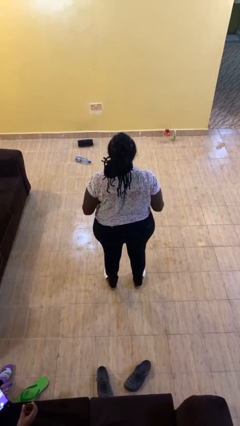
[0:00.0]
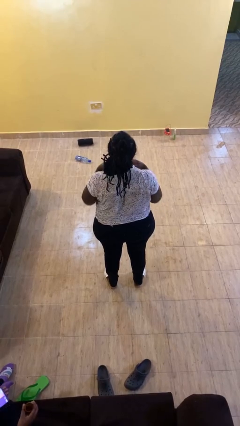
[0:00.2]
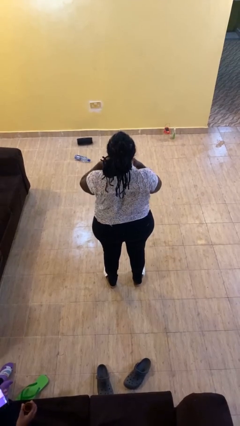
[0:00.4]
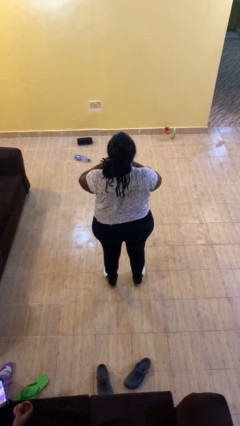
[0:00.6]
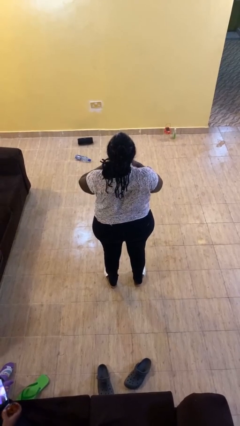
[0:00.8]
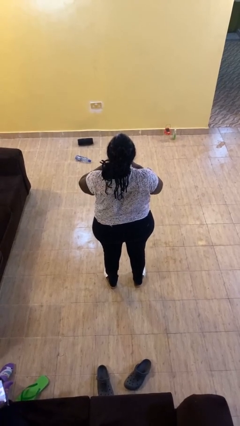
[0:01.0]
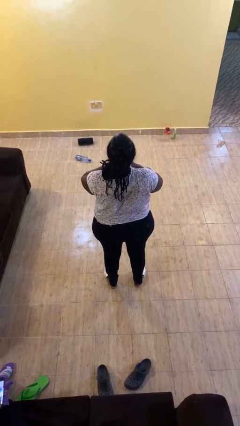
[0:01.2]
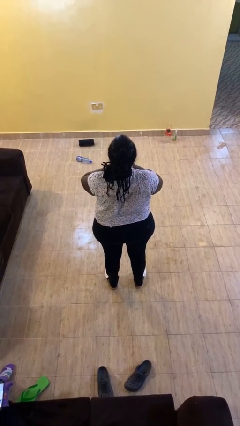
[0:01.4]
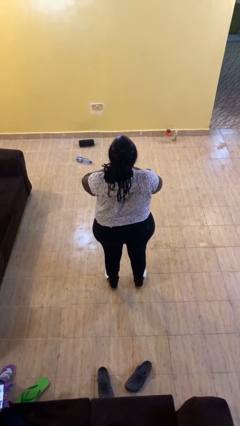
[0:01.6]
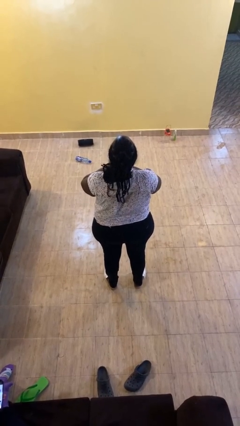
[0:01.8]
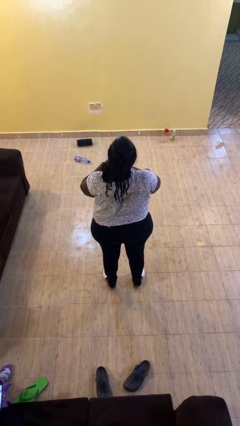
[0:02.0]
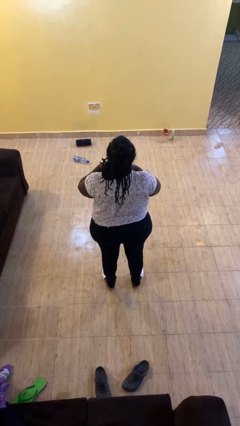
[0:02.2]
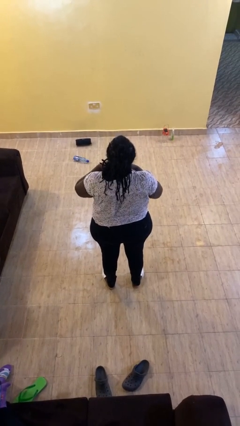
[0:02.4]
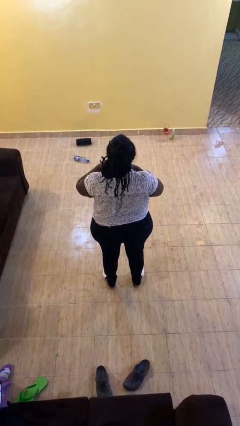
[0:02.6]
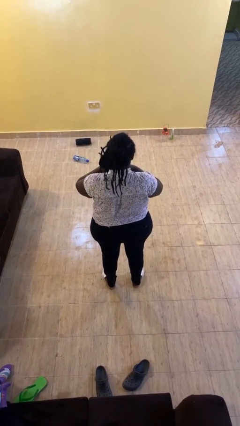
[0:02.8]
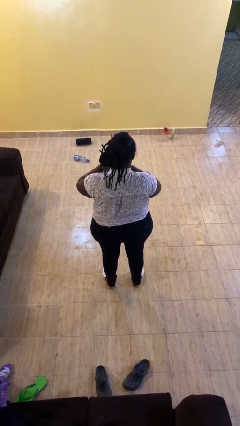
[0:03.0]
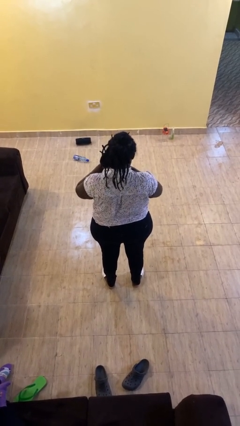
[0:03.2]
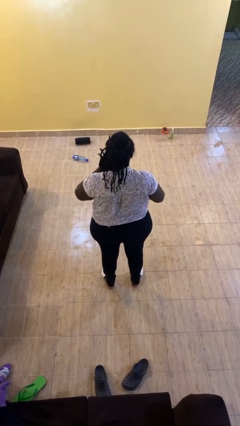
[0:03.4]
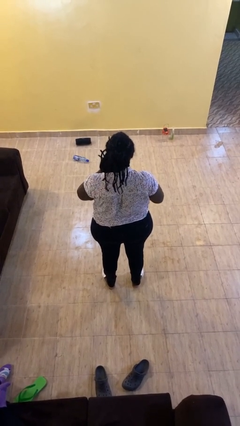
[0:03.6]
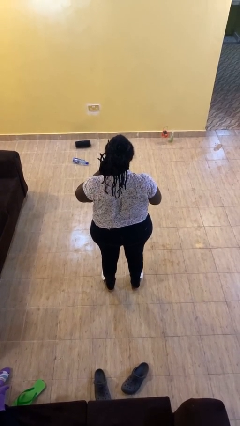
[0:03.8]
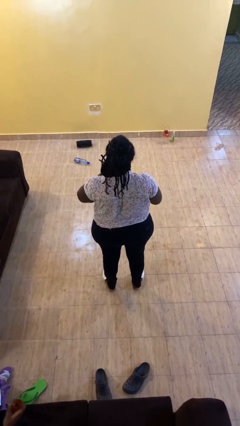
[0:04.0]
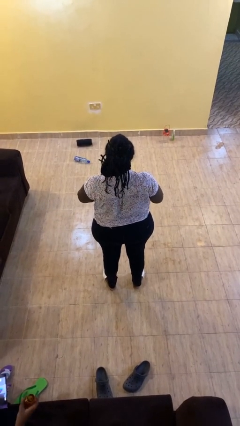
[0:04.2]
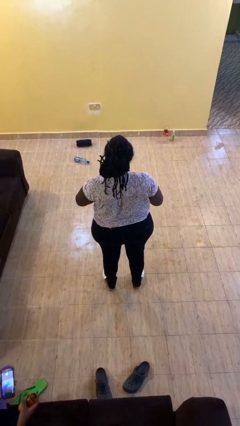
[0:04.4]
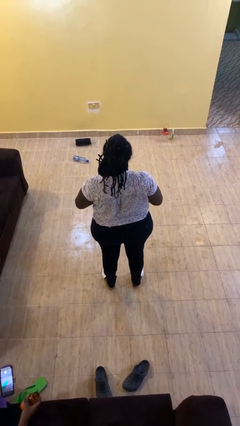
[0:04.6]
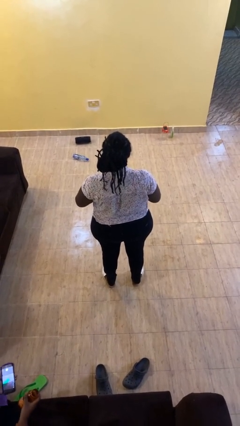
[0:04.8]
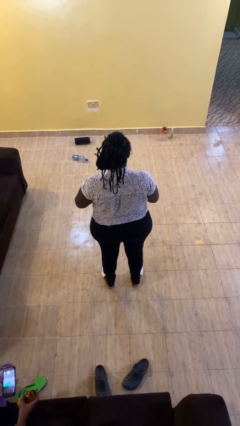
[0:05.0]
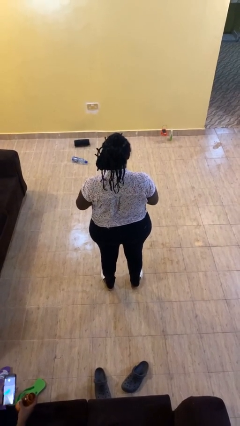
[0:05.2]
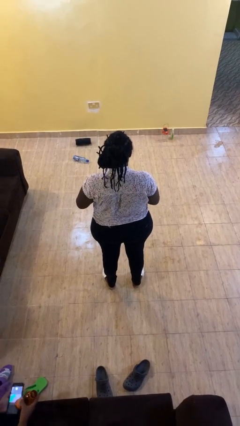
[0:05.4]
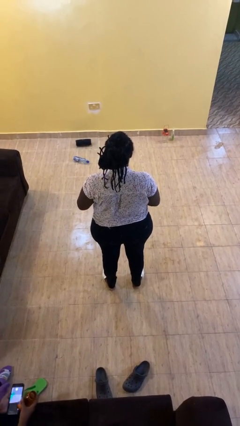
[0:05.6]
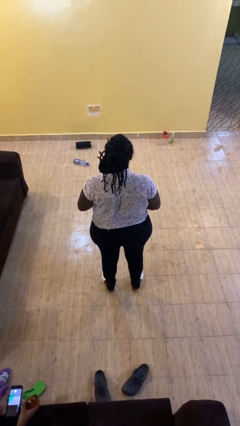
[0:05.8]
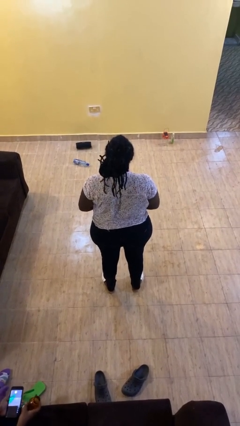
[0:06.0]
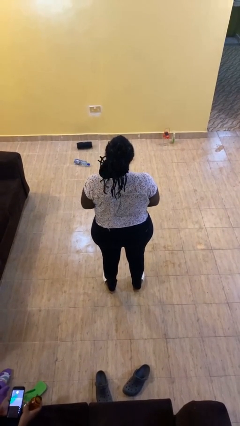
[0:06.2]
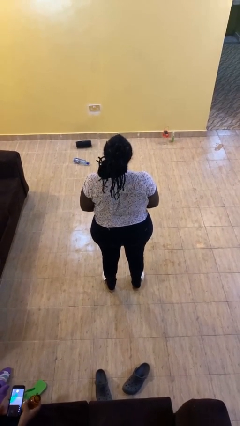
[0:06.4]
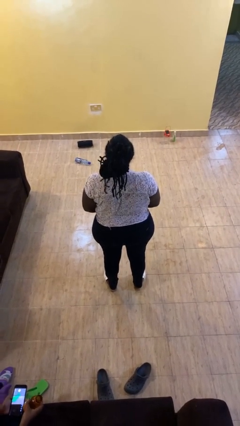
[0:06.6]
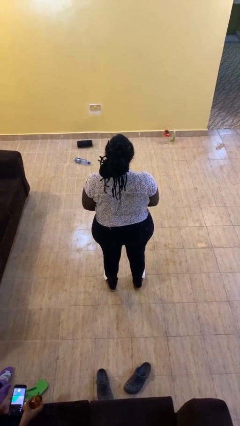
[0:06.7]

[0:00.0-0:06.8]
person buttons shirt

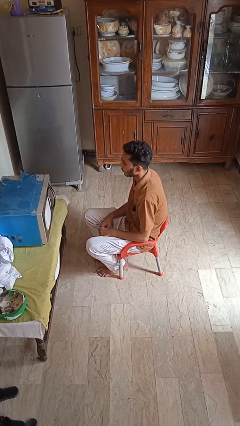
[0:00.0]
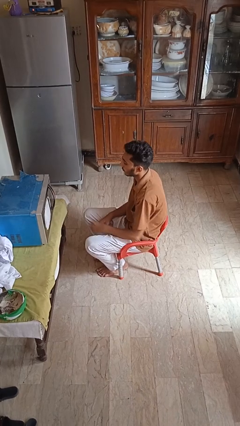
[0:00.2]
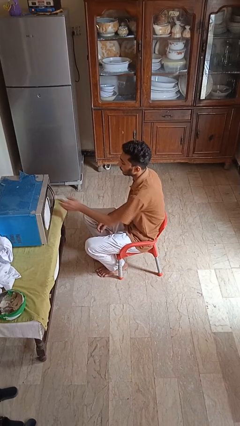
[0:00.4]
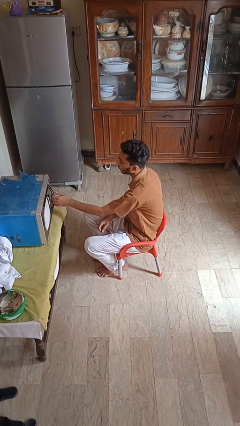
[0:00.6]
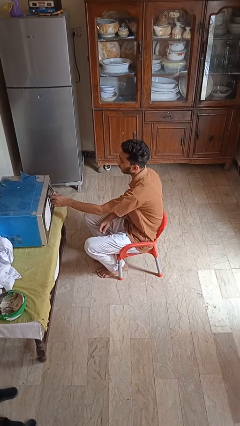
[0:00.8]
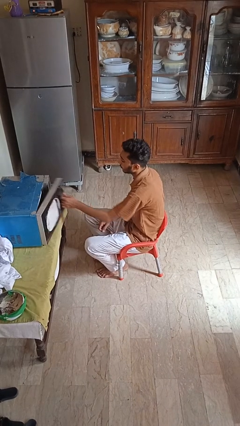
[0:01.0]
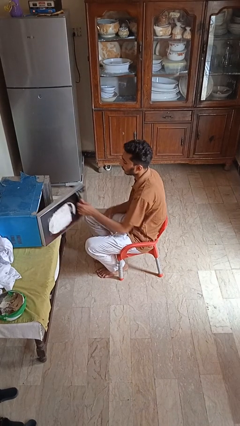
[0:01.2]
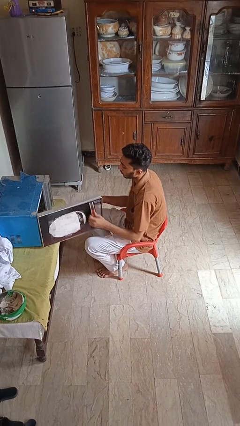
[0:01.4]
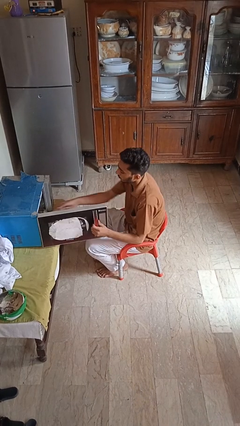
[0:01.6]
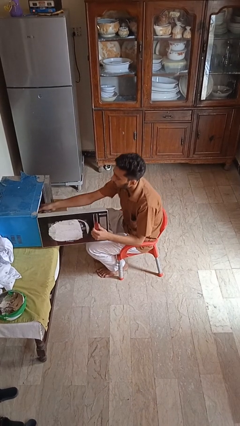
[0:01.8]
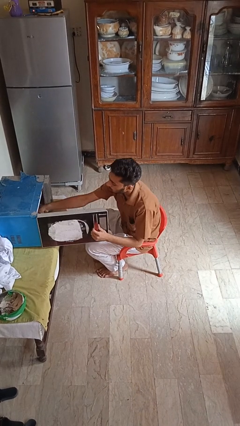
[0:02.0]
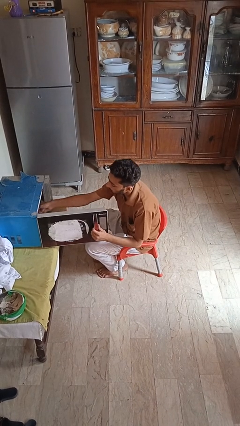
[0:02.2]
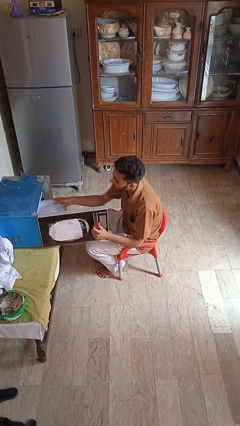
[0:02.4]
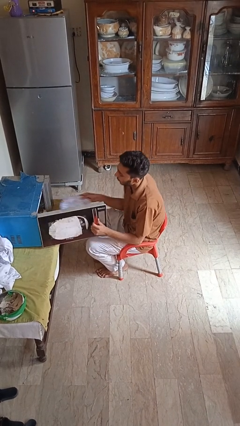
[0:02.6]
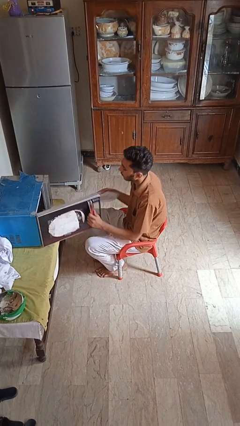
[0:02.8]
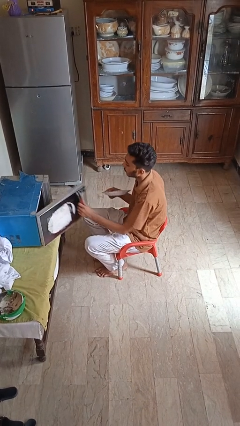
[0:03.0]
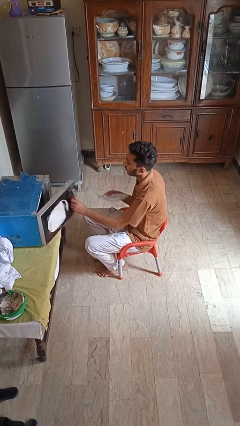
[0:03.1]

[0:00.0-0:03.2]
person takes object from microwave

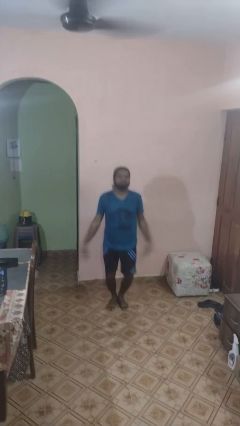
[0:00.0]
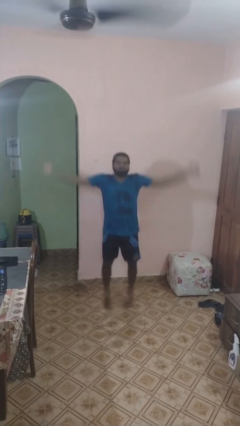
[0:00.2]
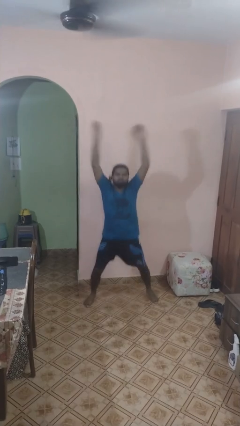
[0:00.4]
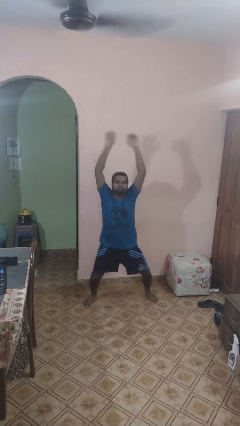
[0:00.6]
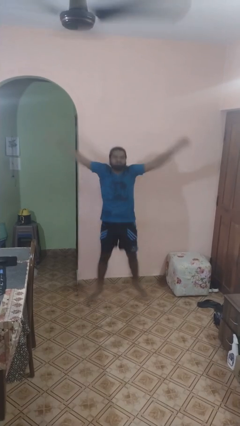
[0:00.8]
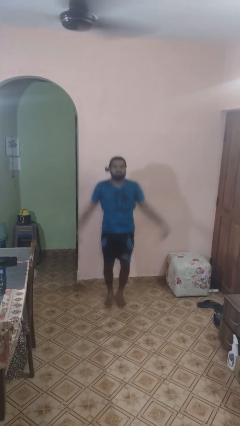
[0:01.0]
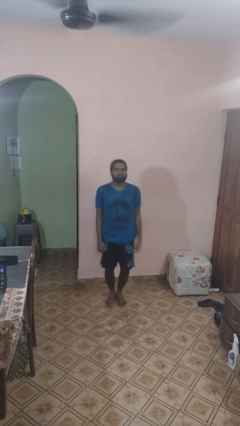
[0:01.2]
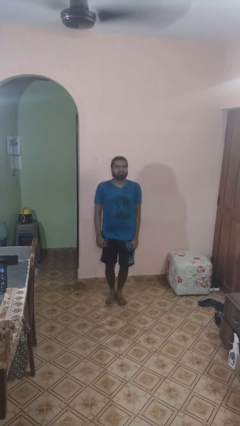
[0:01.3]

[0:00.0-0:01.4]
person exercises with jumping jacks

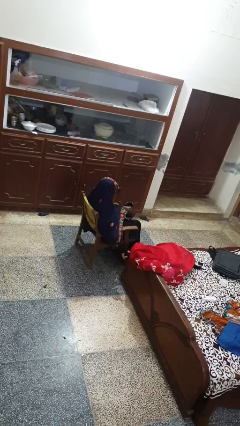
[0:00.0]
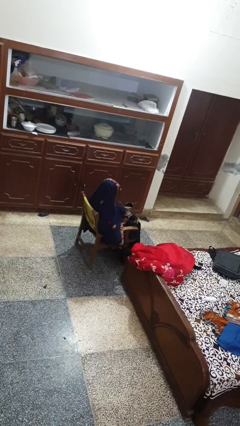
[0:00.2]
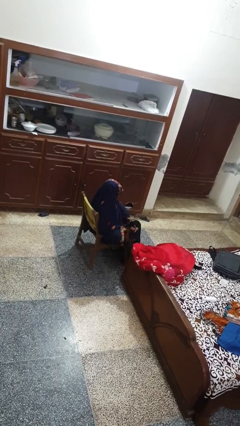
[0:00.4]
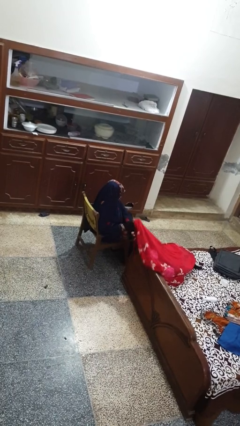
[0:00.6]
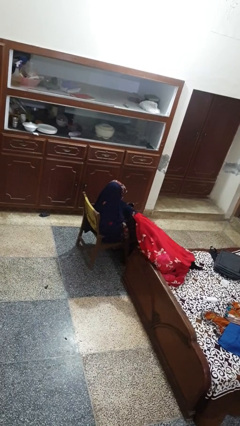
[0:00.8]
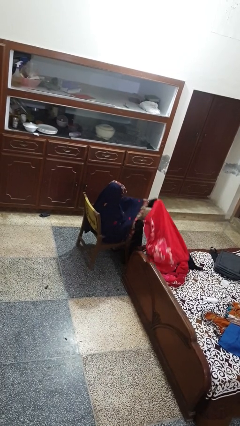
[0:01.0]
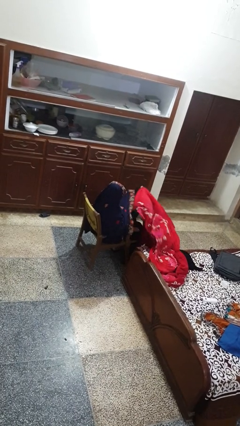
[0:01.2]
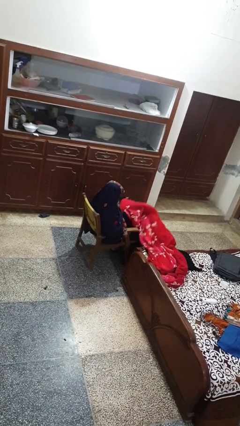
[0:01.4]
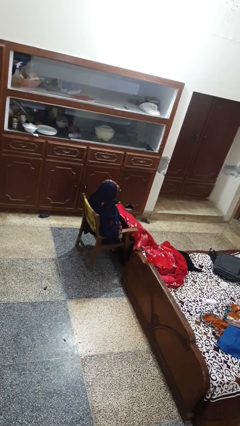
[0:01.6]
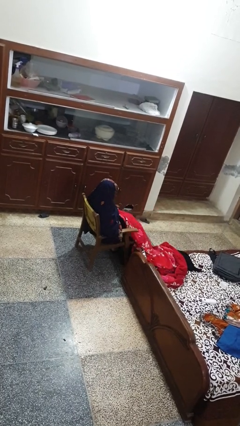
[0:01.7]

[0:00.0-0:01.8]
person covers with blanket

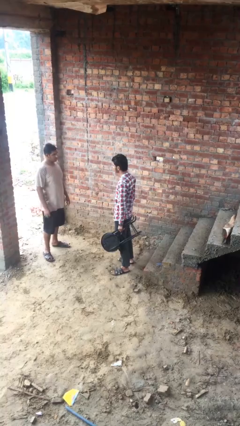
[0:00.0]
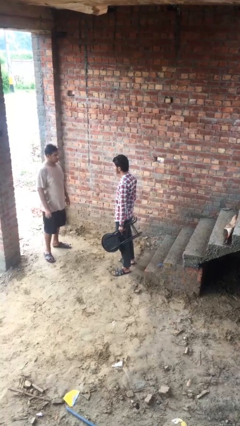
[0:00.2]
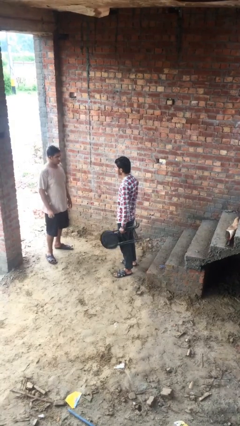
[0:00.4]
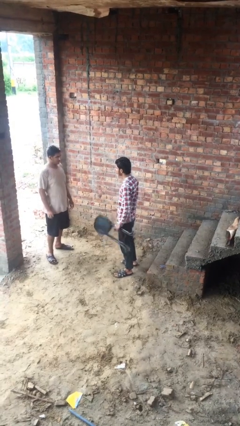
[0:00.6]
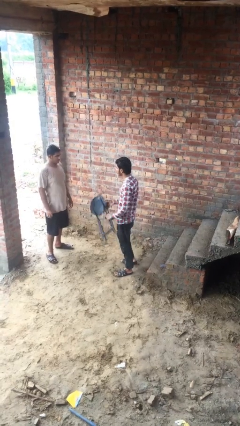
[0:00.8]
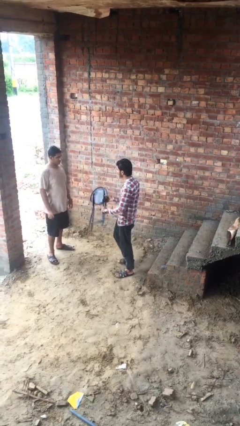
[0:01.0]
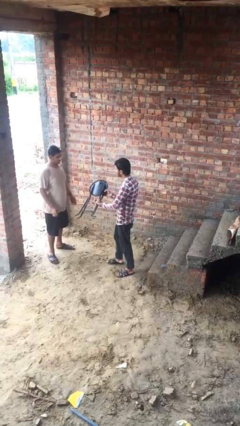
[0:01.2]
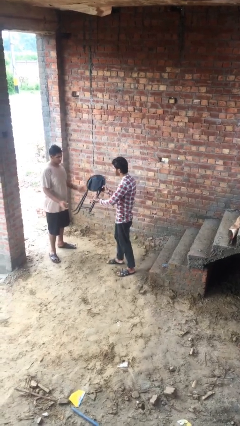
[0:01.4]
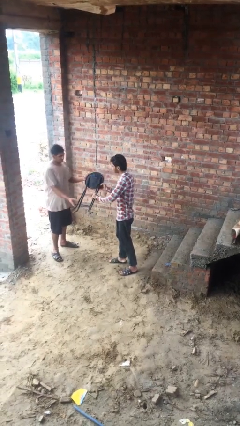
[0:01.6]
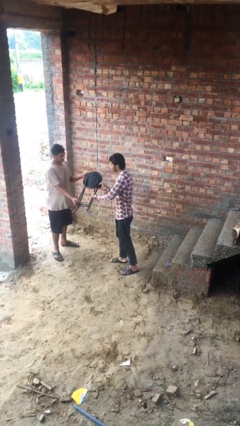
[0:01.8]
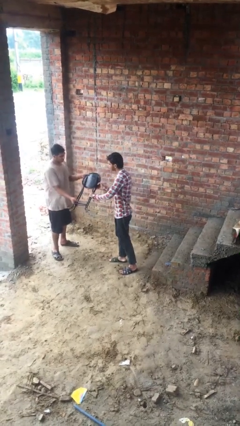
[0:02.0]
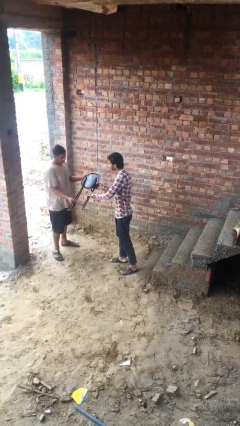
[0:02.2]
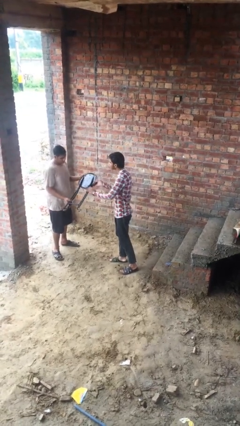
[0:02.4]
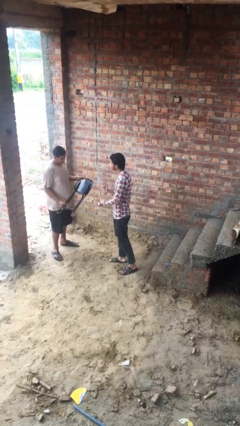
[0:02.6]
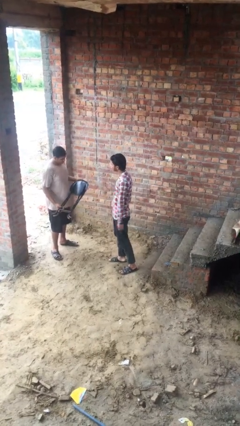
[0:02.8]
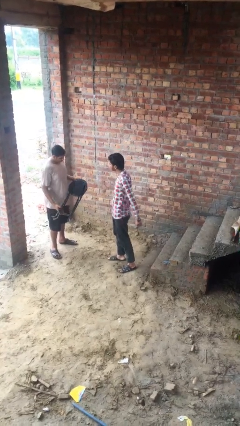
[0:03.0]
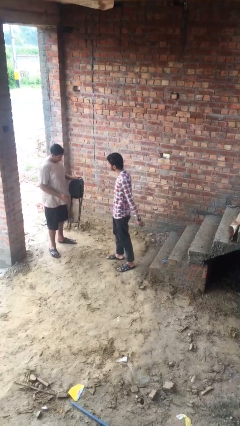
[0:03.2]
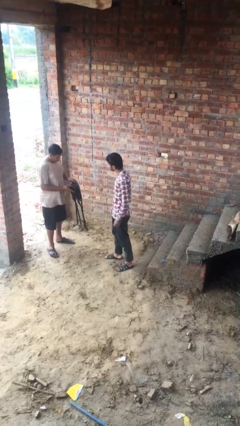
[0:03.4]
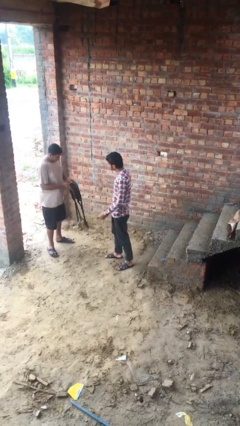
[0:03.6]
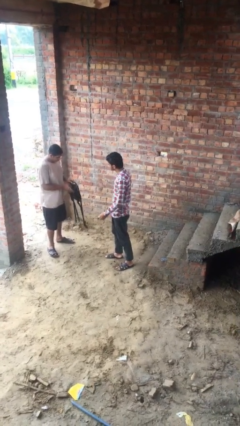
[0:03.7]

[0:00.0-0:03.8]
person transfers object to person

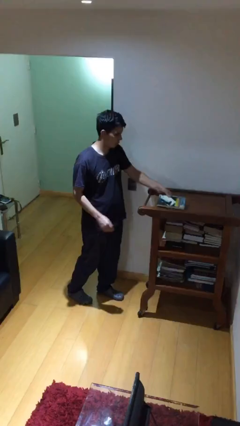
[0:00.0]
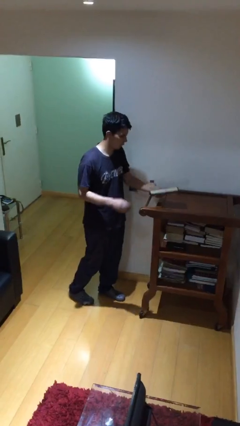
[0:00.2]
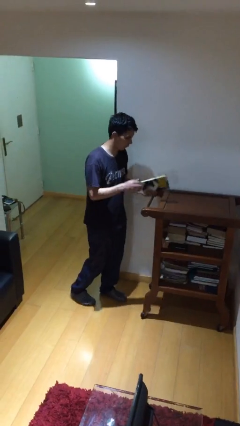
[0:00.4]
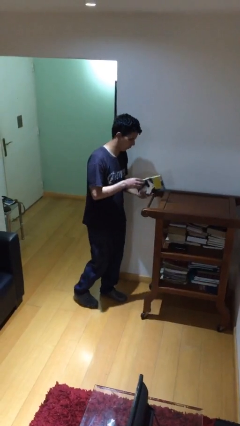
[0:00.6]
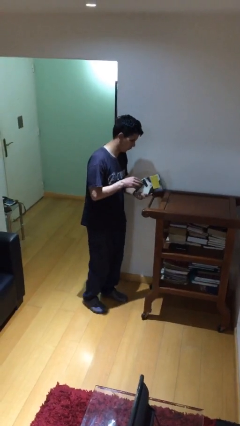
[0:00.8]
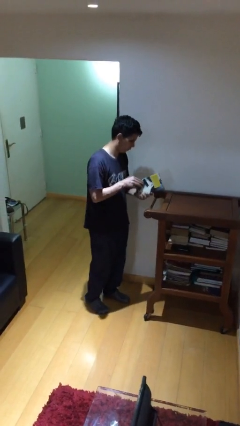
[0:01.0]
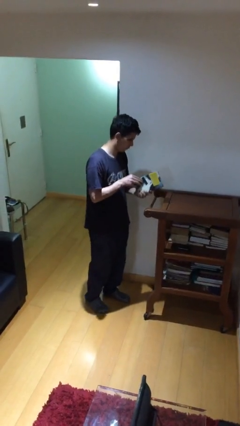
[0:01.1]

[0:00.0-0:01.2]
person picks up object from table
